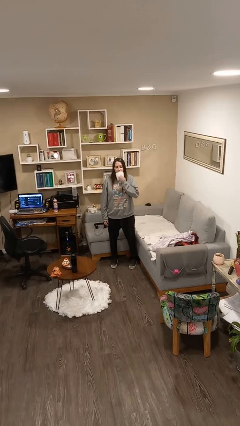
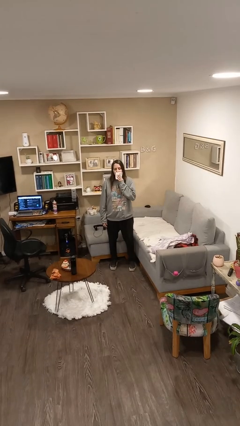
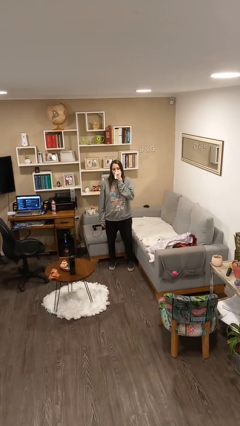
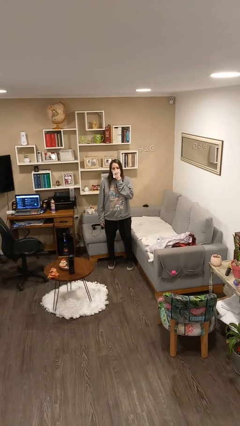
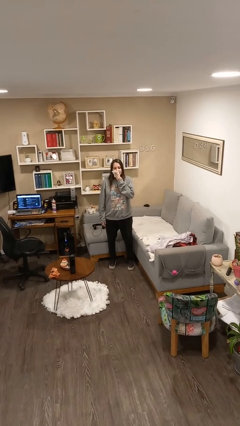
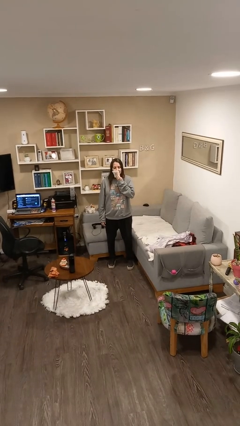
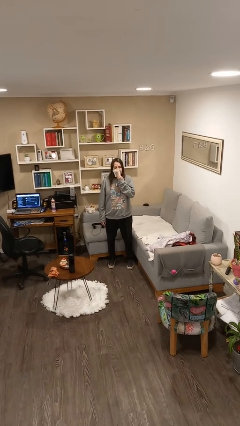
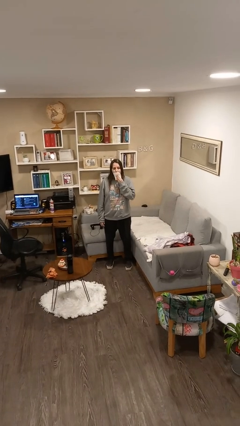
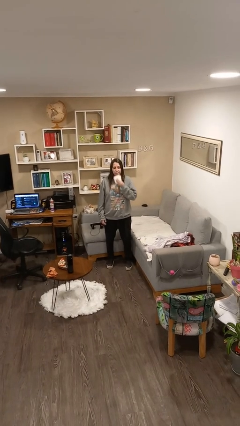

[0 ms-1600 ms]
person wipes mouth with napkin

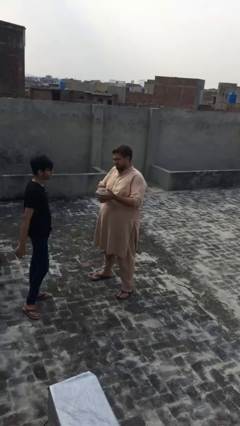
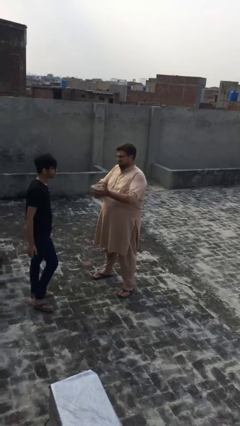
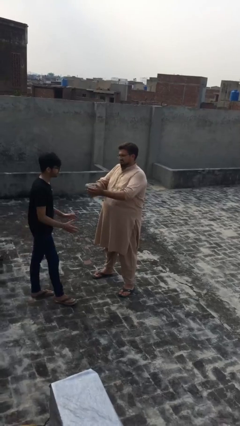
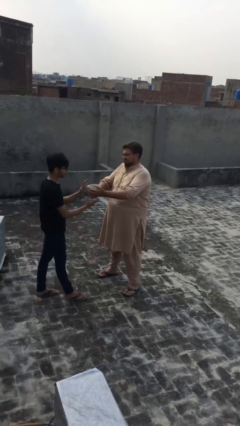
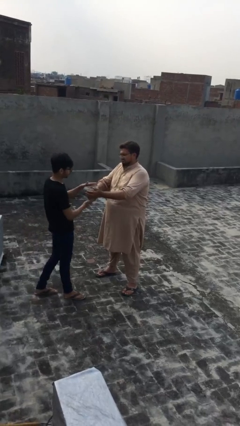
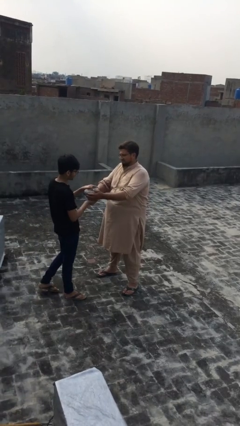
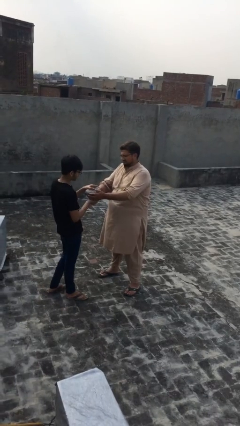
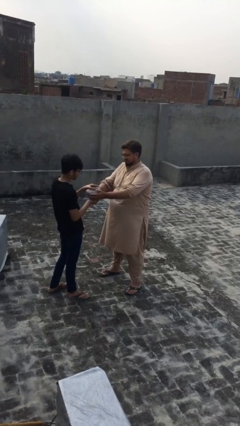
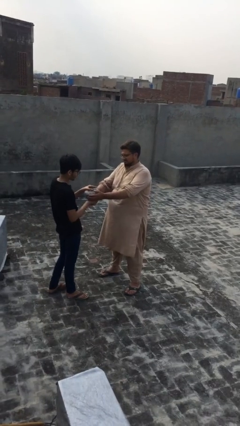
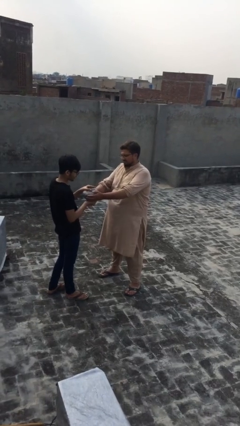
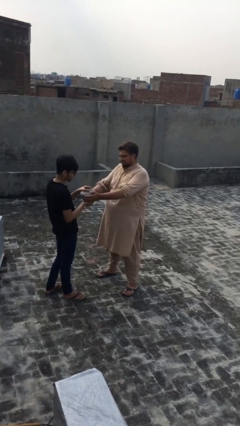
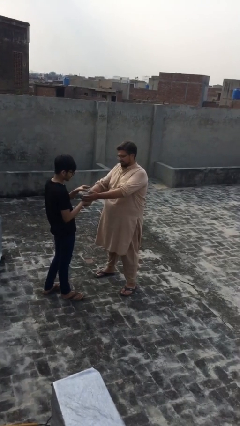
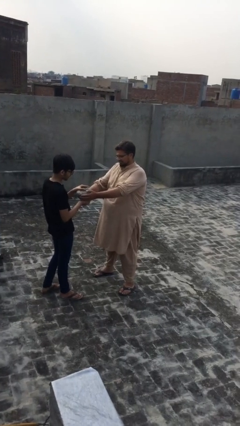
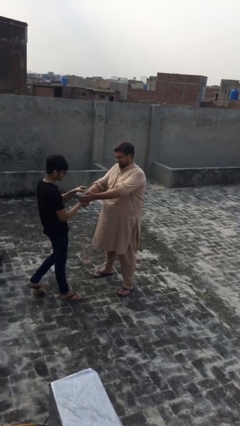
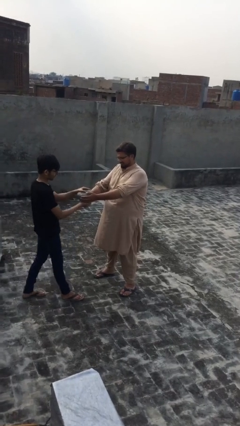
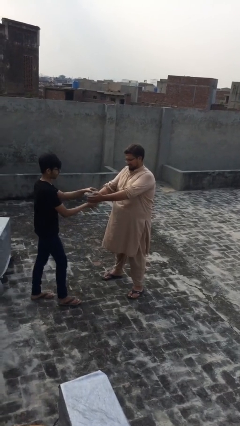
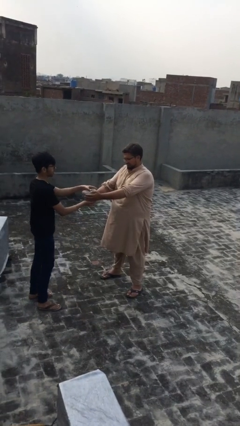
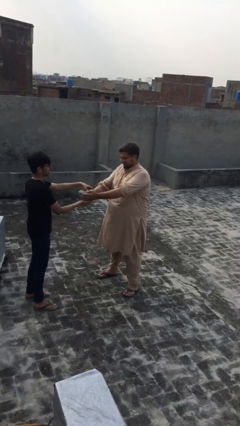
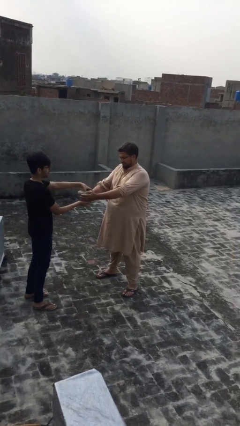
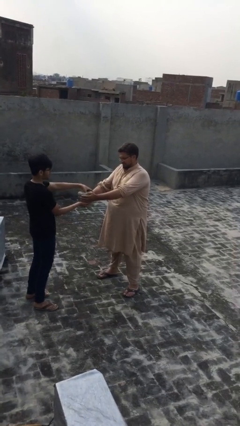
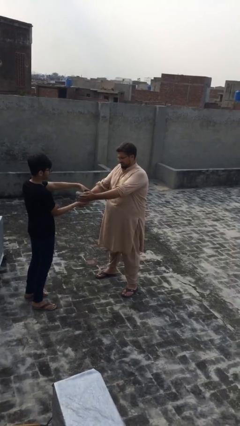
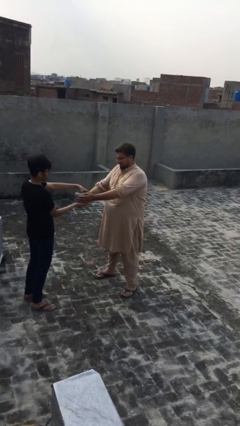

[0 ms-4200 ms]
person transfers object to person

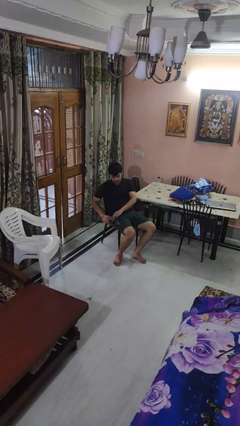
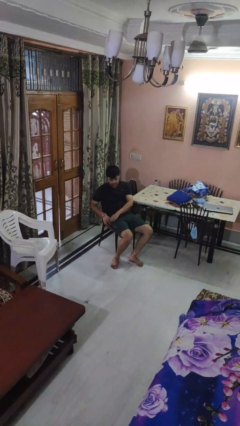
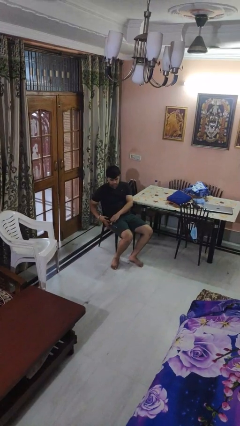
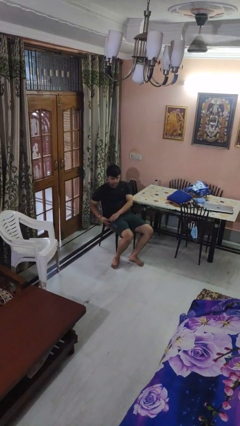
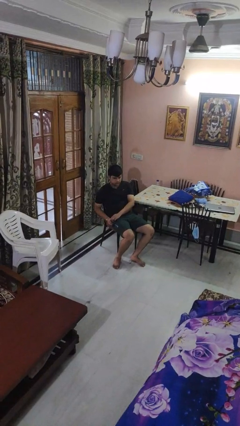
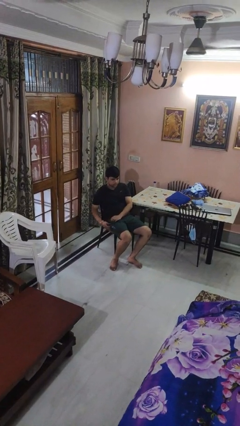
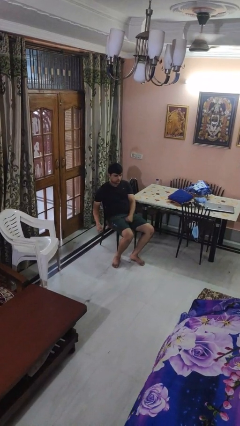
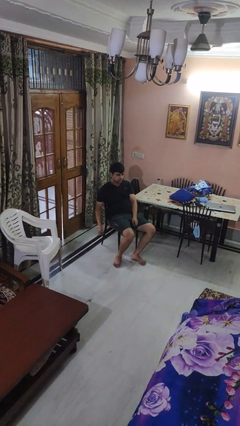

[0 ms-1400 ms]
person puts phone into pocket

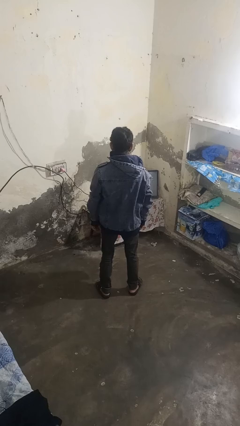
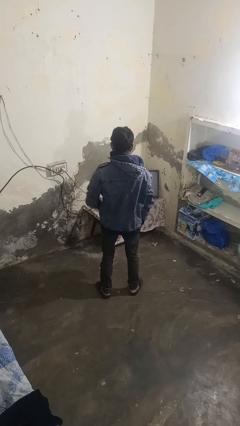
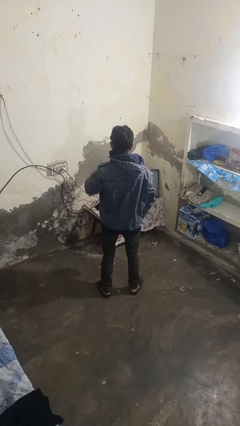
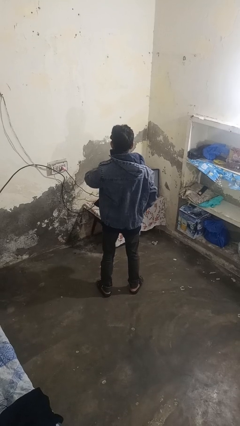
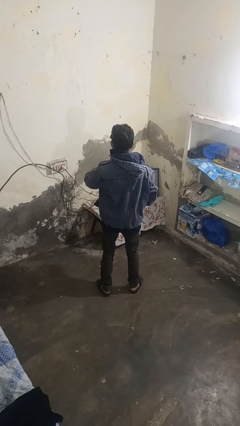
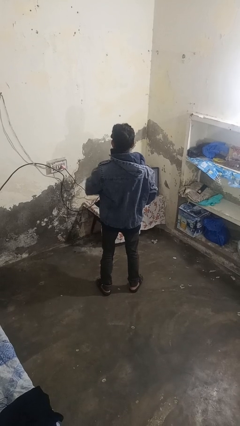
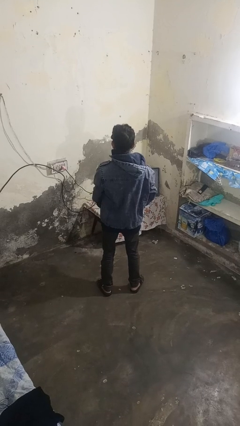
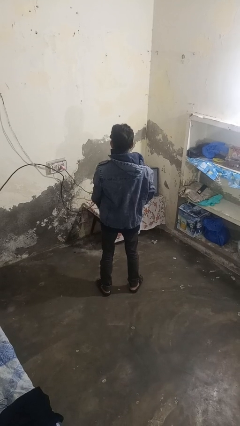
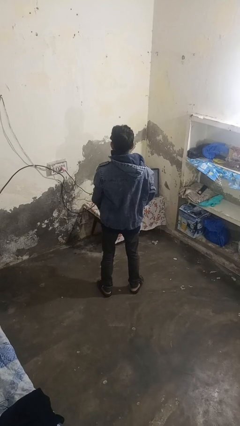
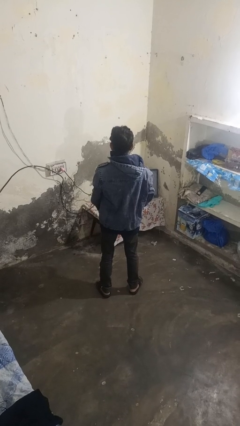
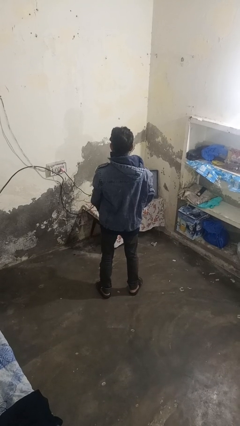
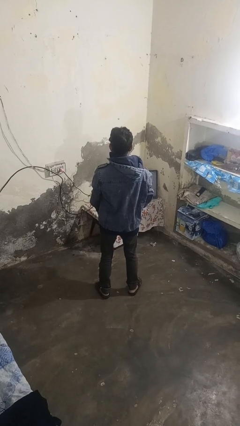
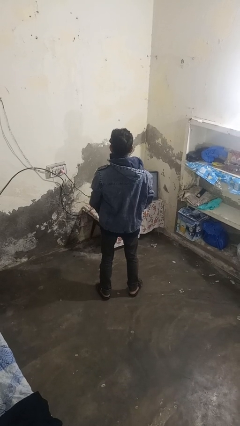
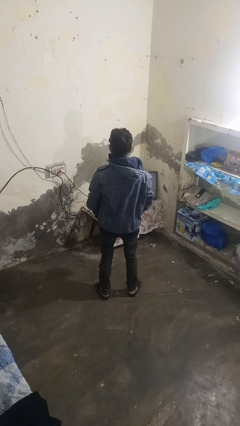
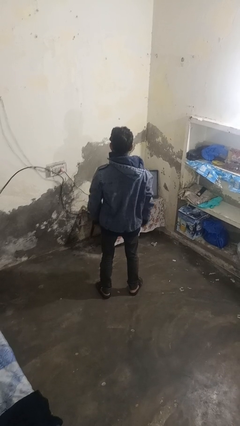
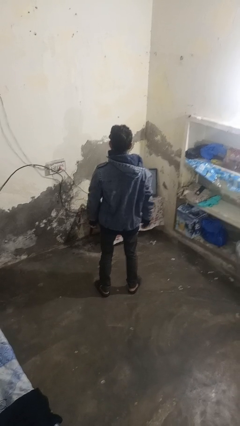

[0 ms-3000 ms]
person unzips jacket

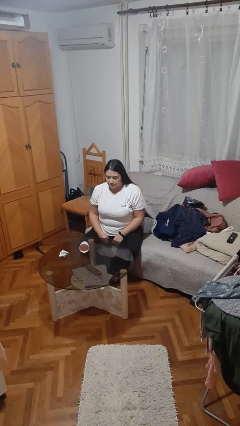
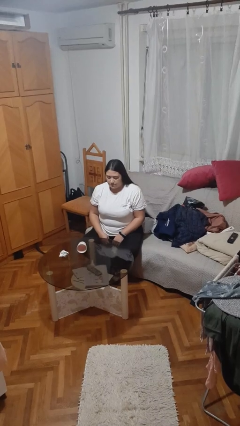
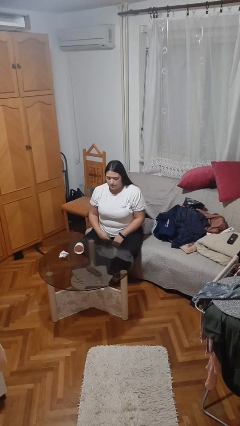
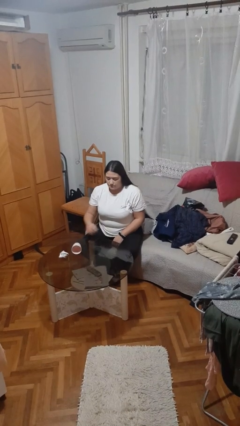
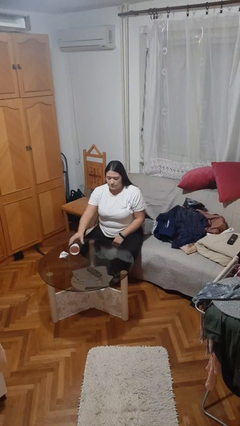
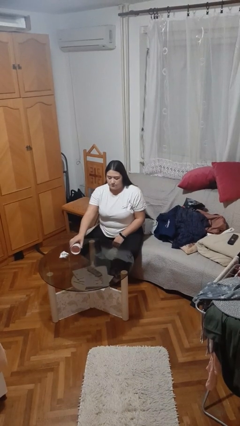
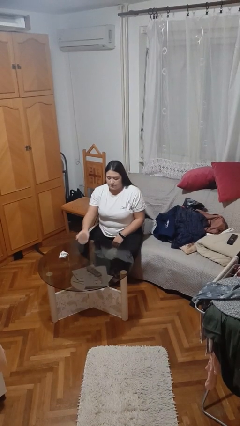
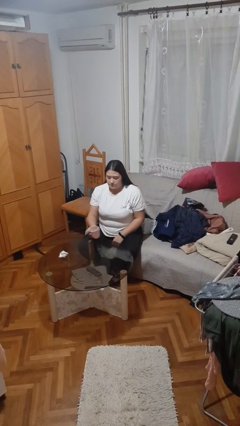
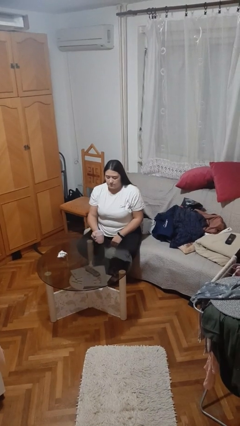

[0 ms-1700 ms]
person sets upright glass

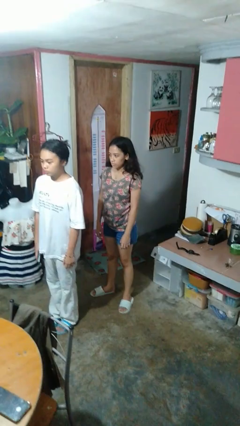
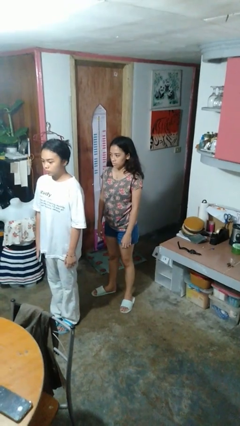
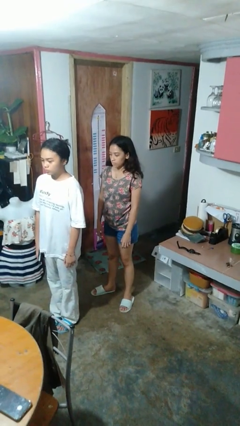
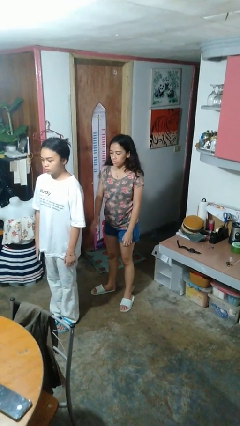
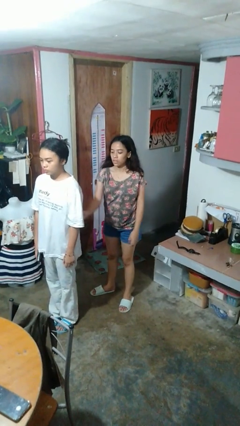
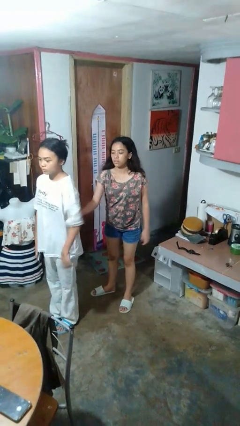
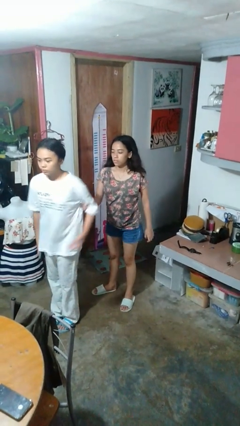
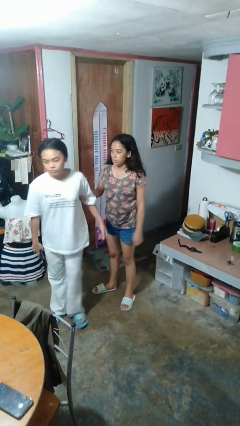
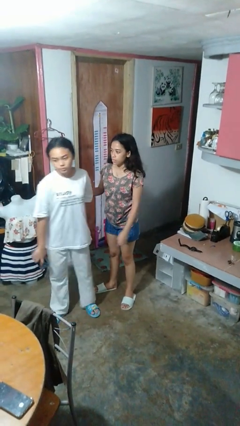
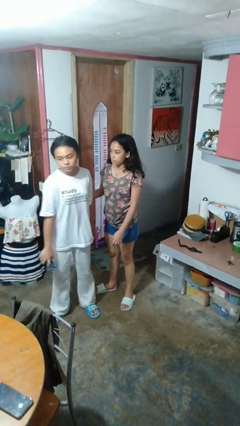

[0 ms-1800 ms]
person grabs person by bicep

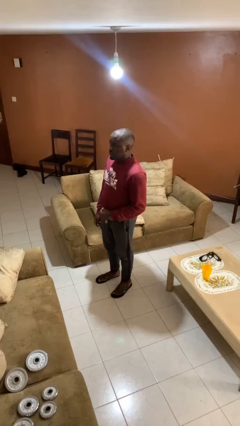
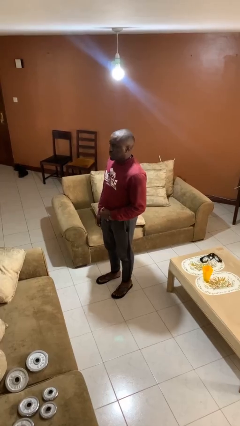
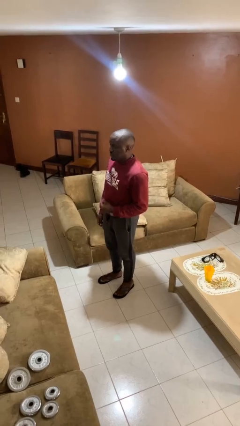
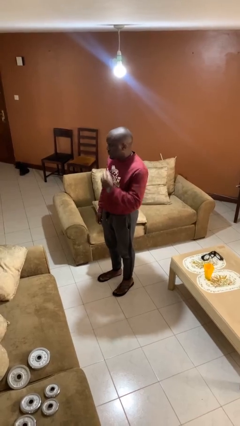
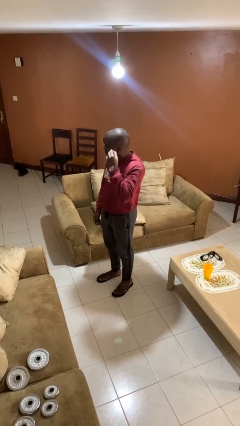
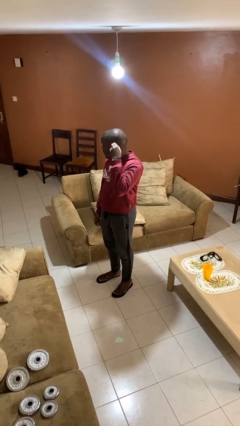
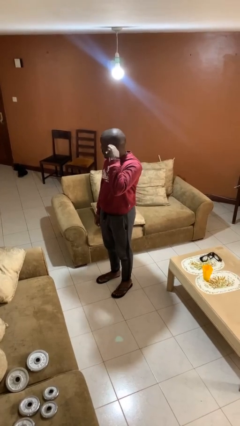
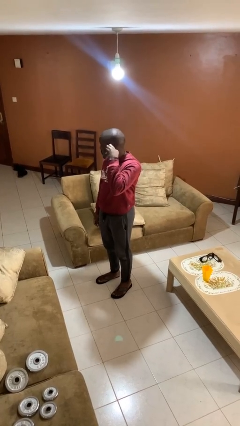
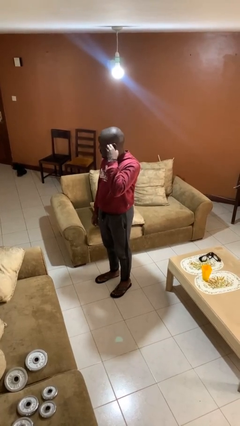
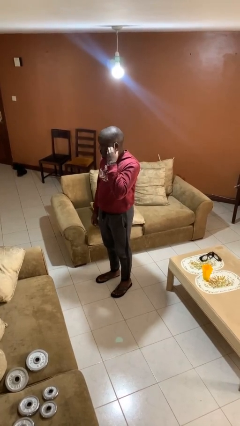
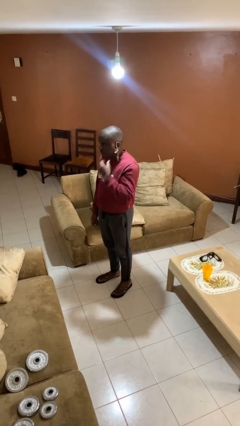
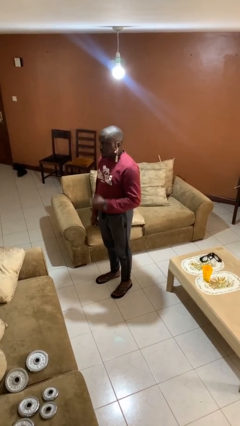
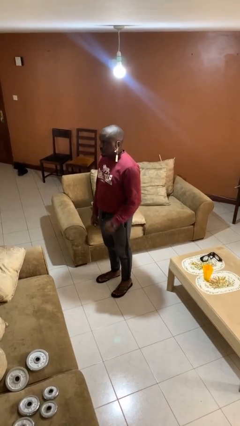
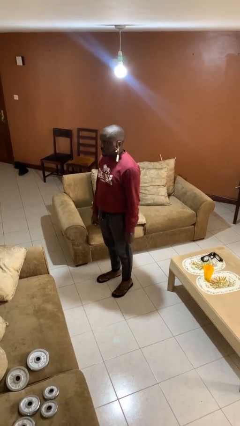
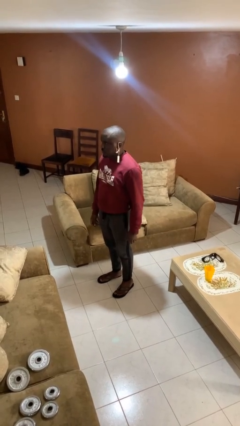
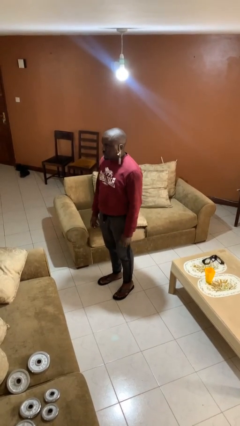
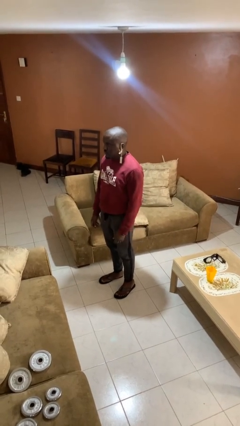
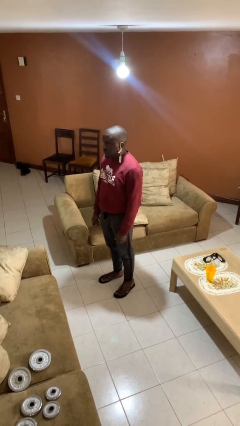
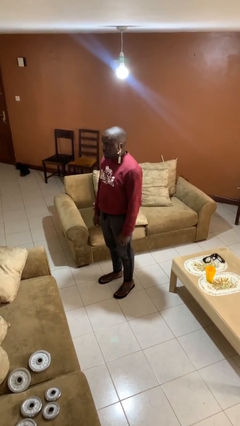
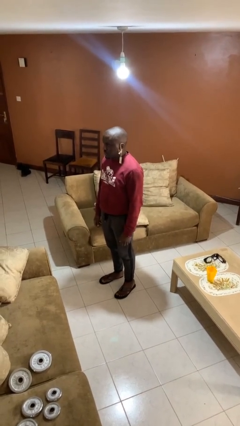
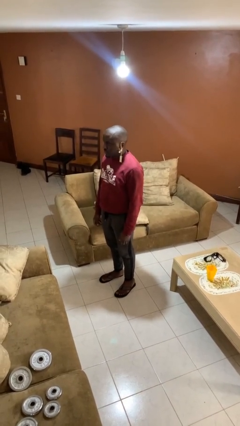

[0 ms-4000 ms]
person puts on earrings
